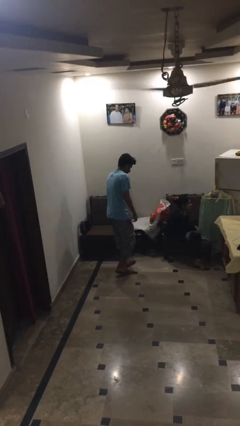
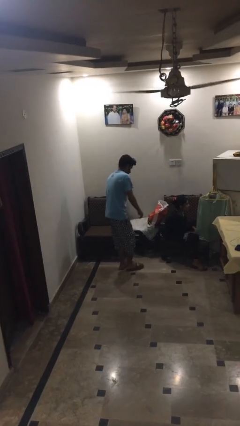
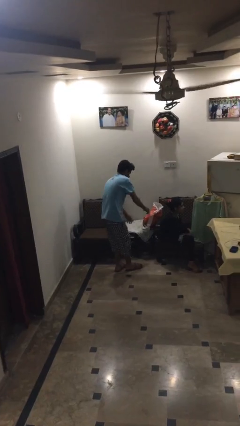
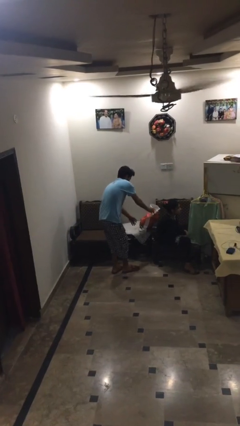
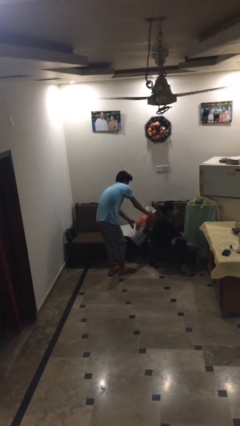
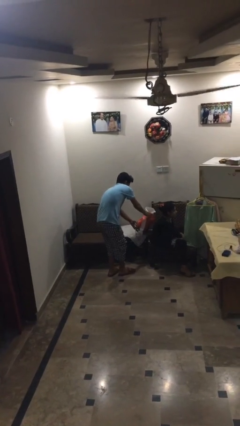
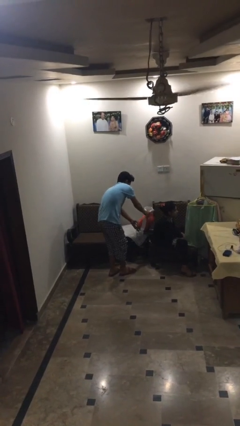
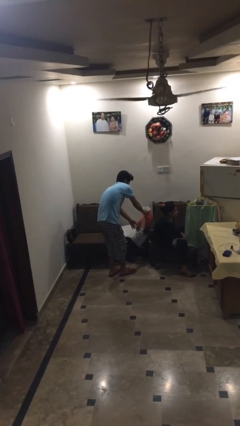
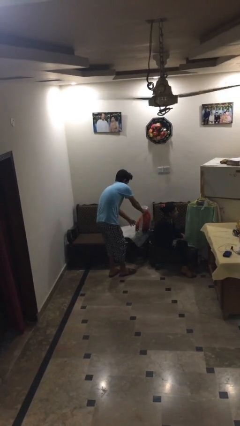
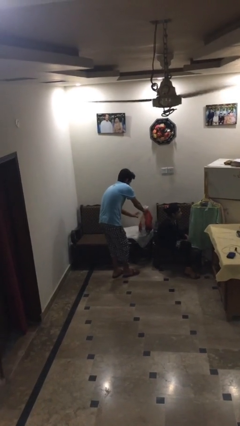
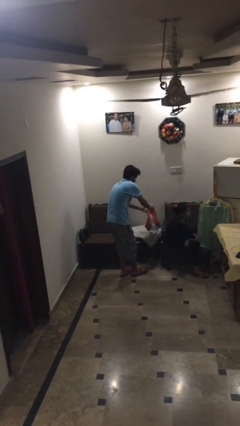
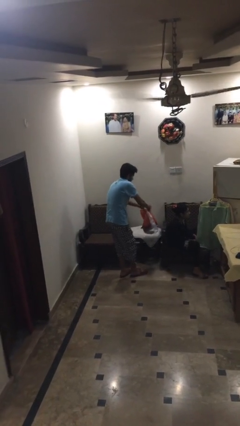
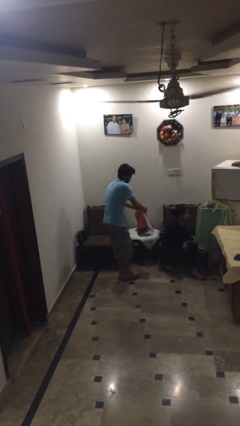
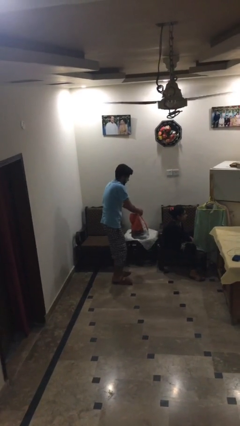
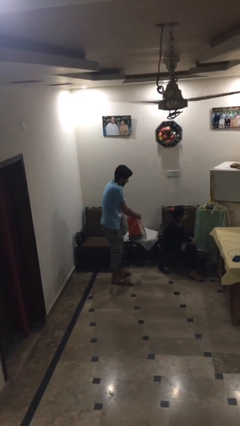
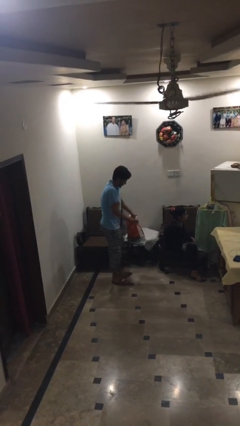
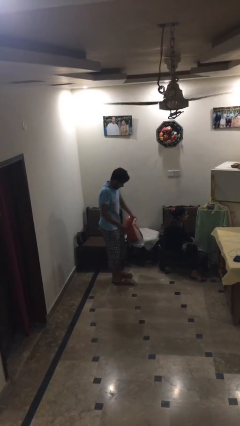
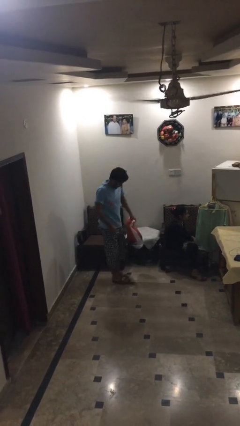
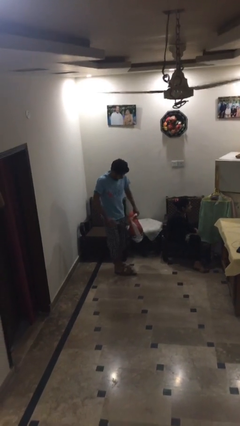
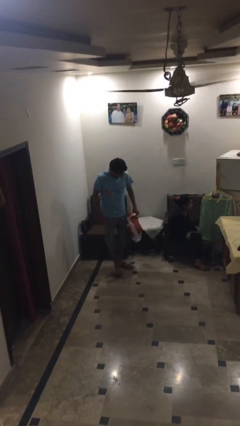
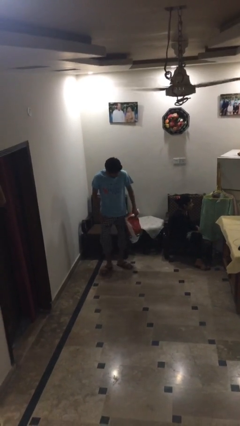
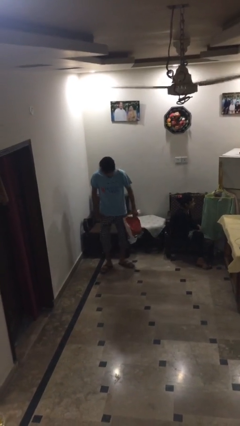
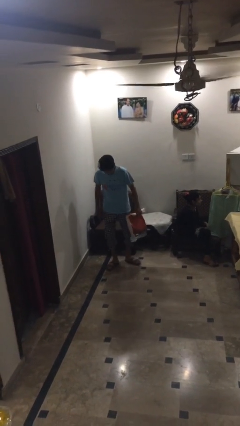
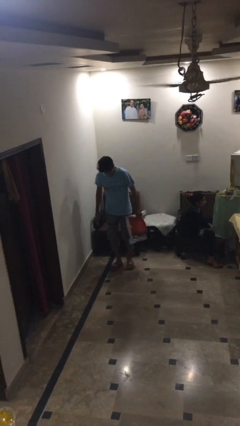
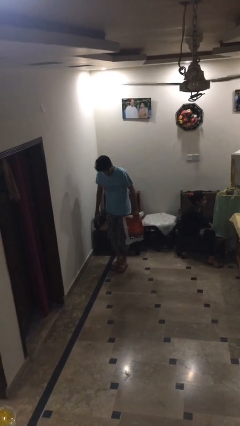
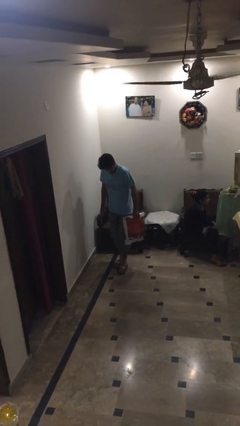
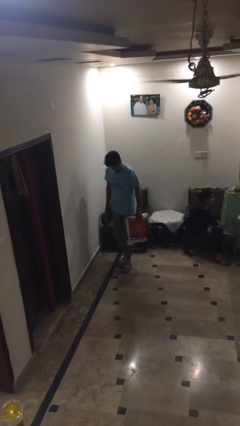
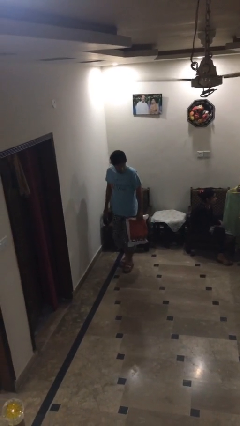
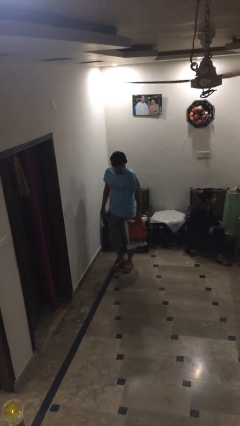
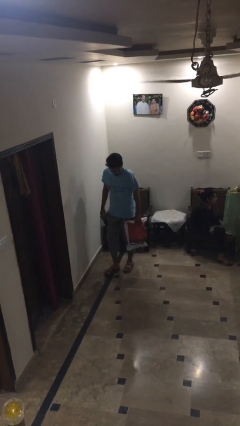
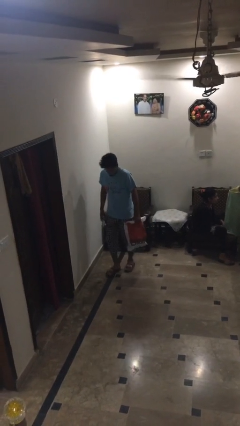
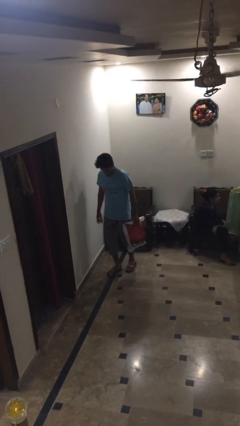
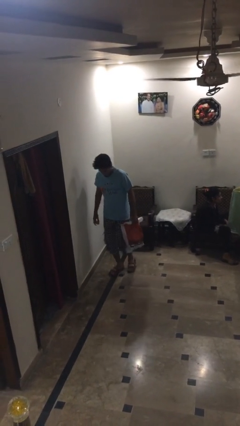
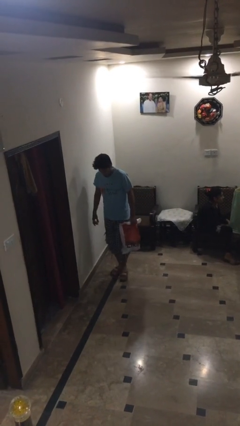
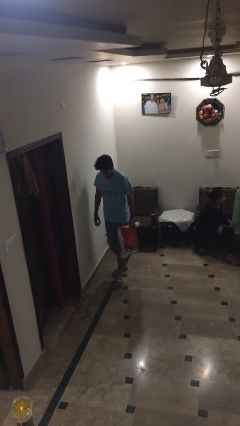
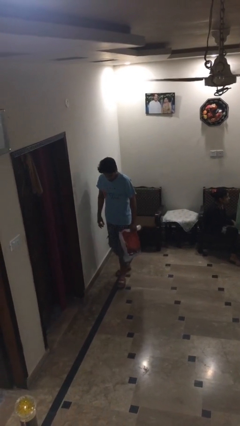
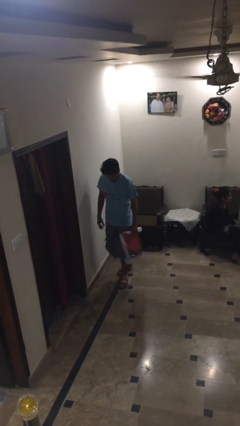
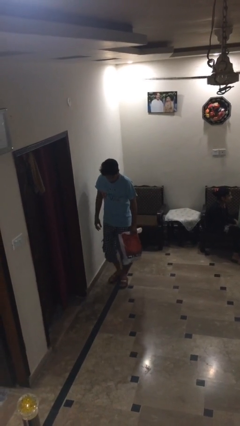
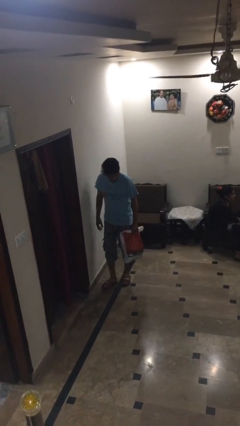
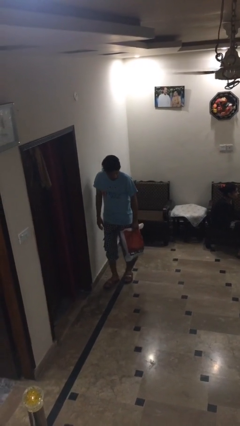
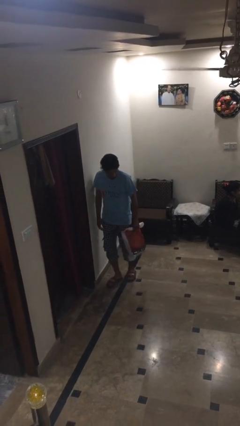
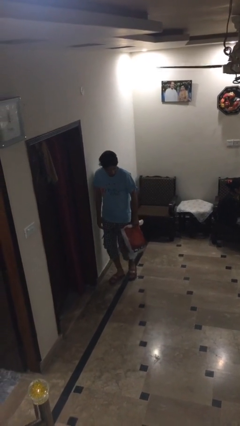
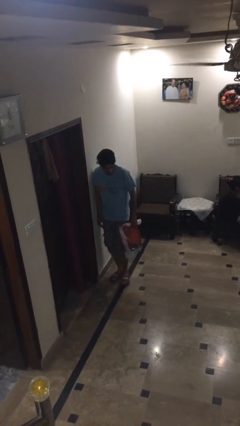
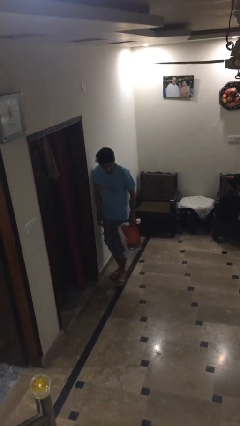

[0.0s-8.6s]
person steals object from person

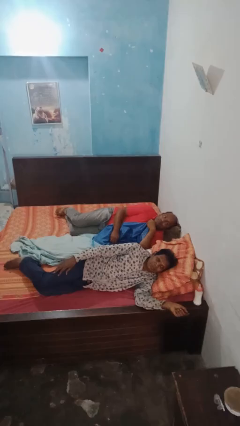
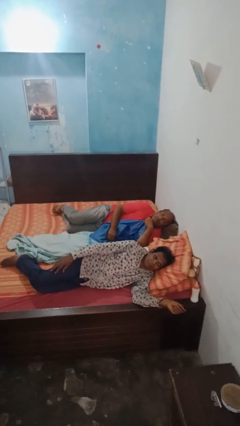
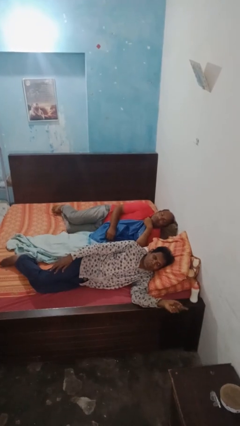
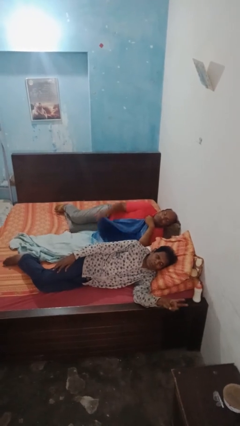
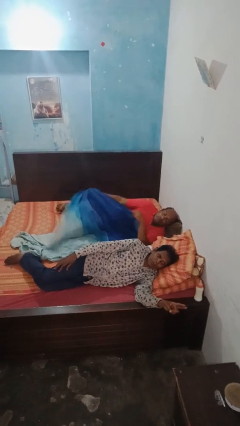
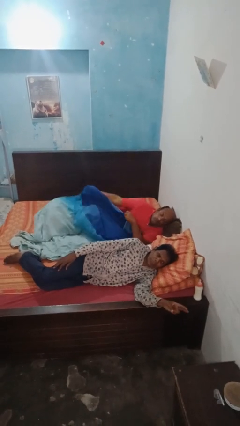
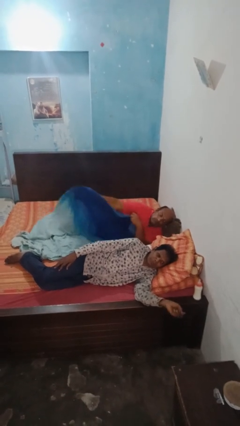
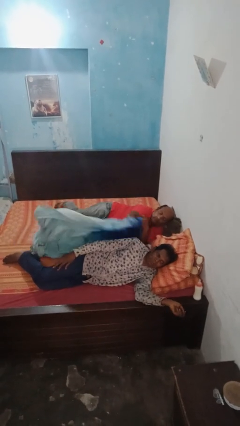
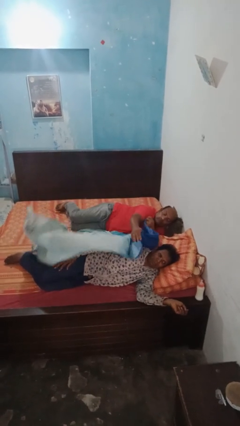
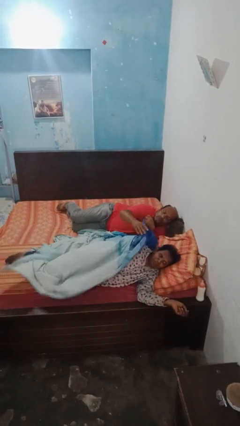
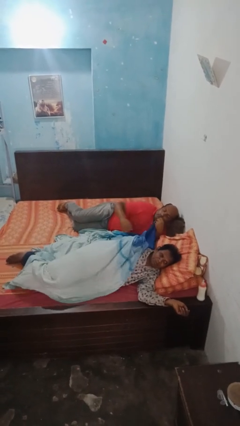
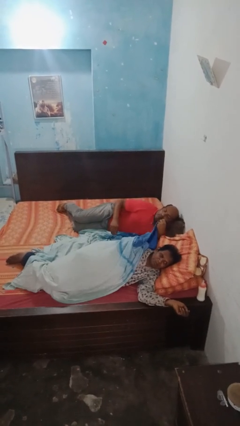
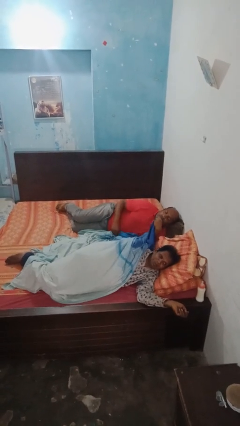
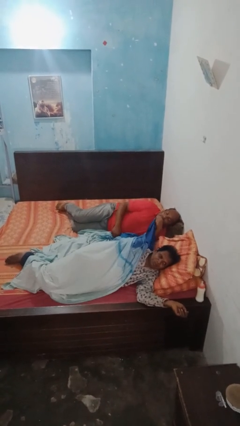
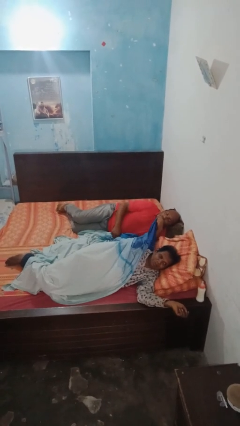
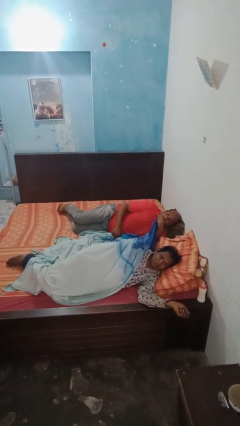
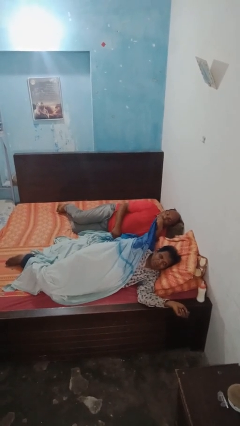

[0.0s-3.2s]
person covers friend with blanket

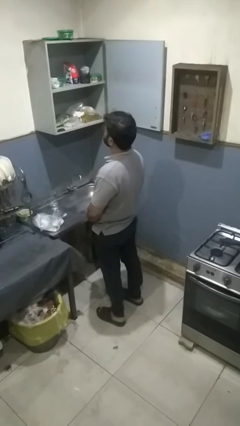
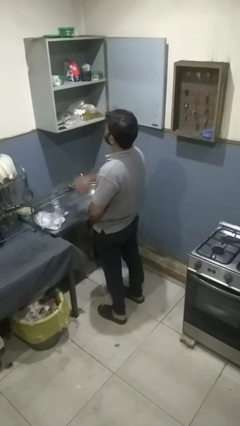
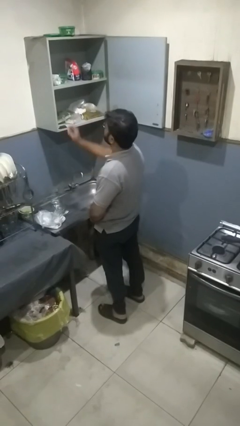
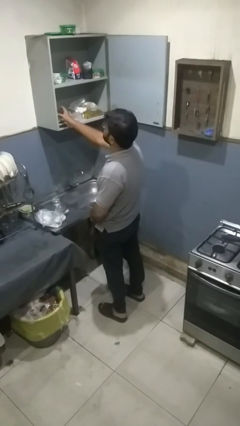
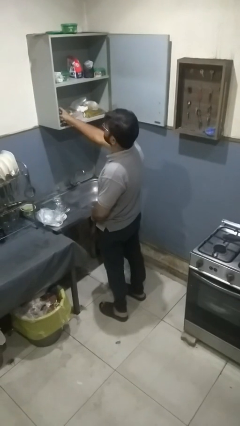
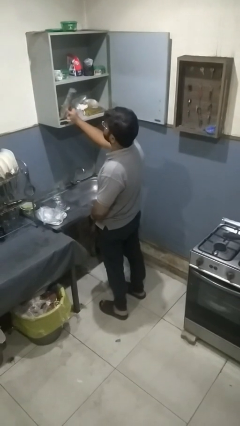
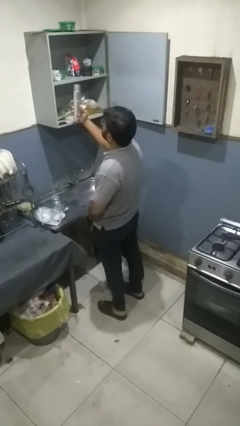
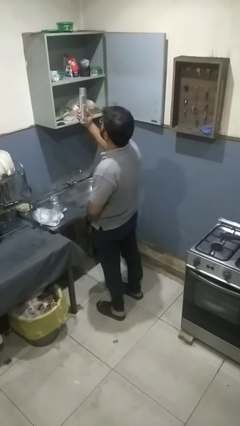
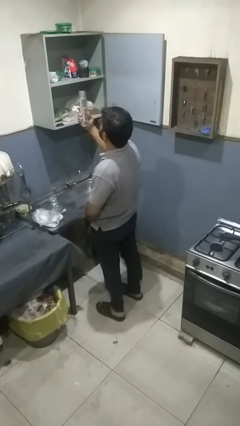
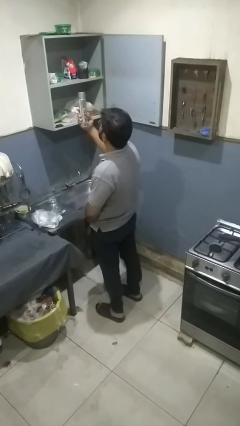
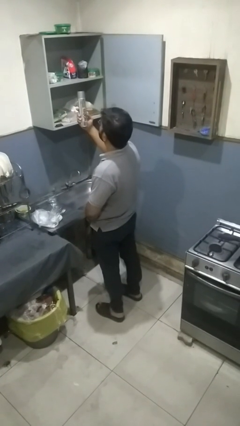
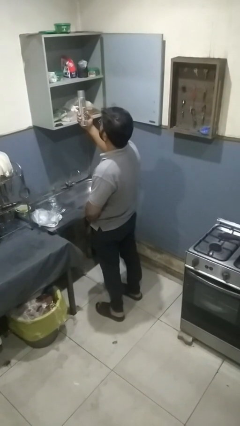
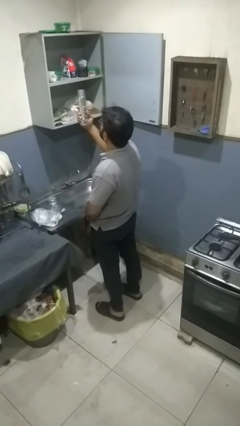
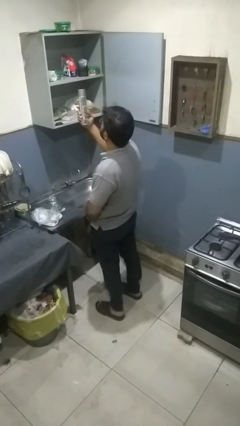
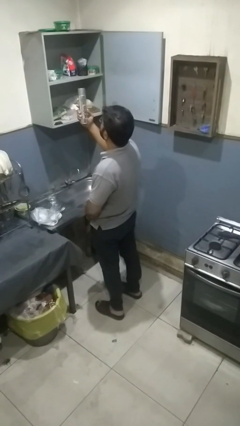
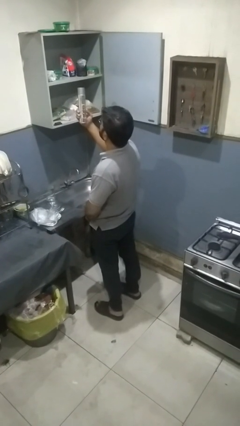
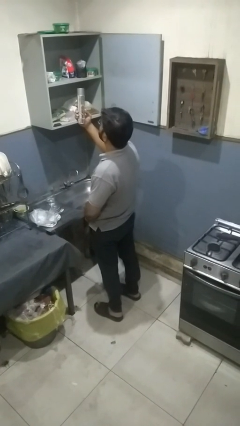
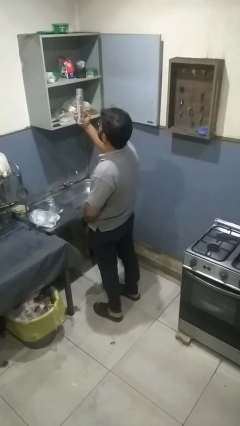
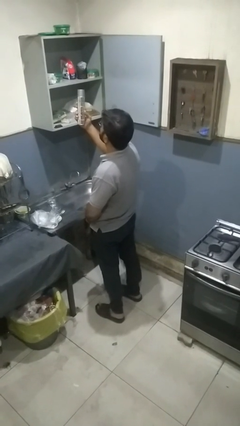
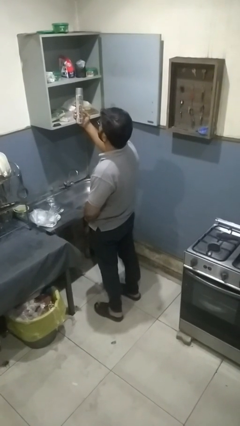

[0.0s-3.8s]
person picks up object from cabinet

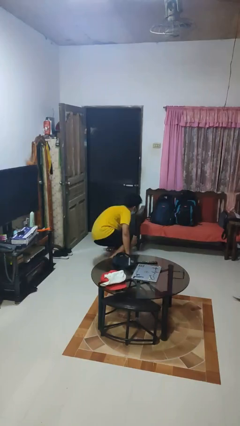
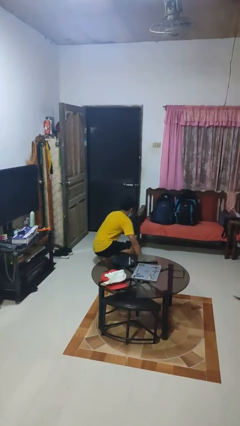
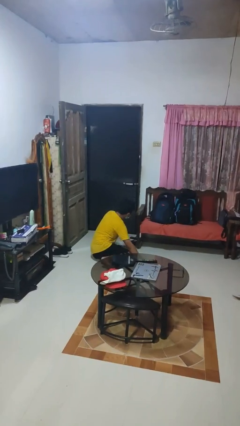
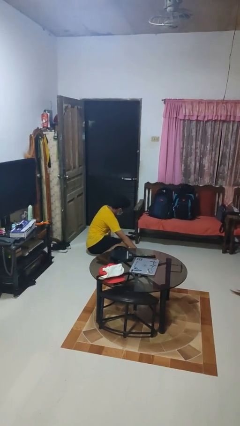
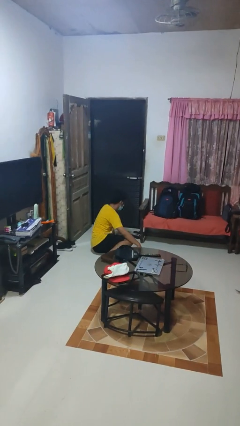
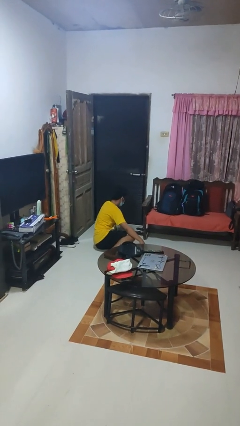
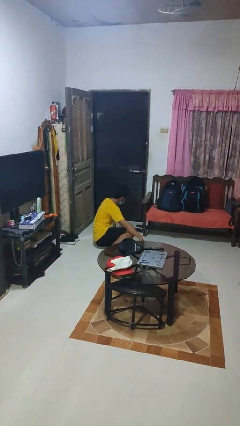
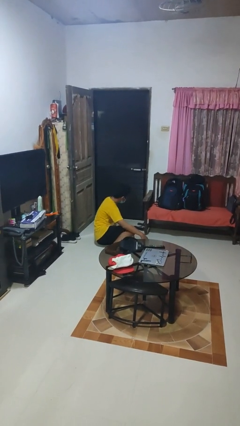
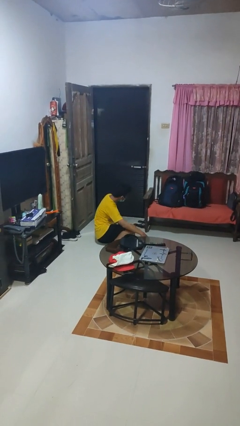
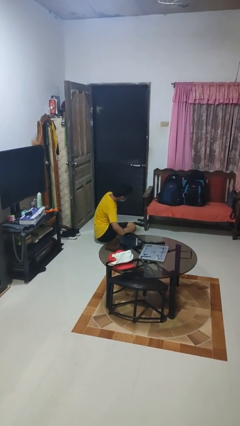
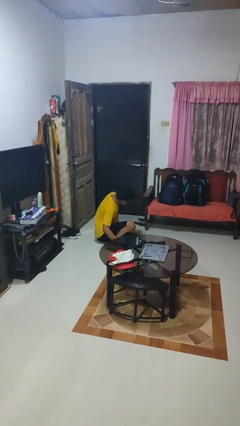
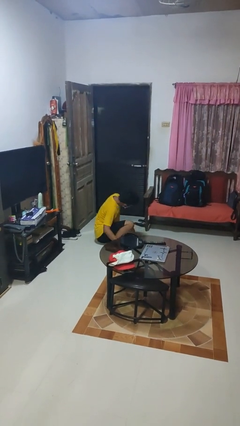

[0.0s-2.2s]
person lies down on floor
